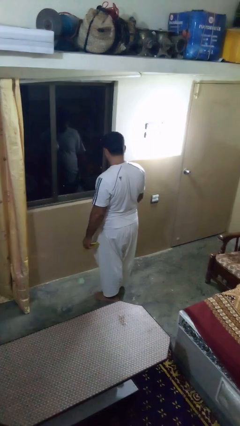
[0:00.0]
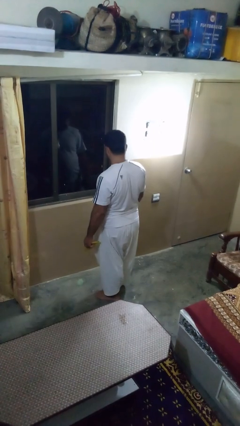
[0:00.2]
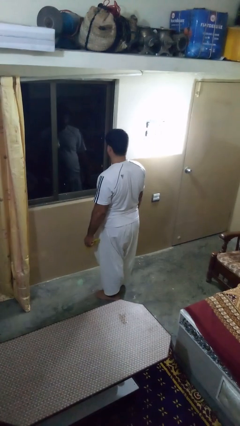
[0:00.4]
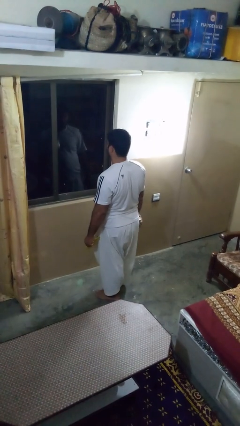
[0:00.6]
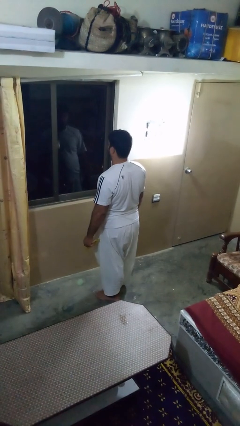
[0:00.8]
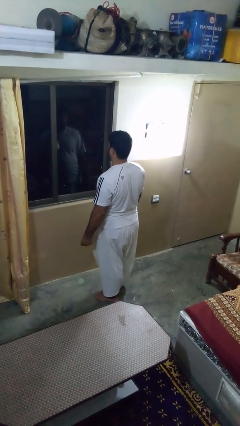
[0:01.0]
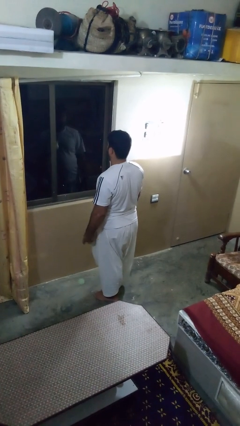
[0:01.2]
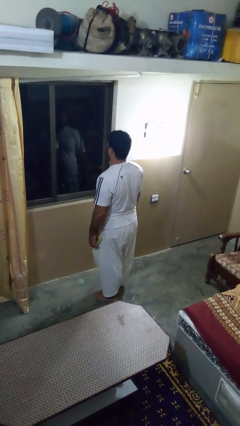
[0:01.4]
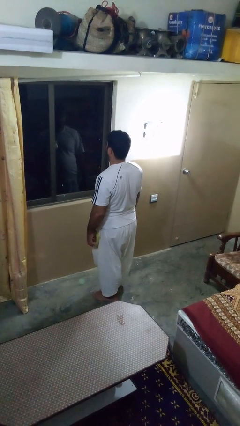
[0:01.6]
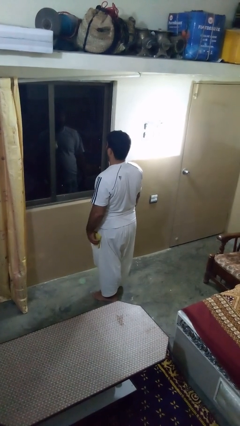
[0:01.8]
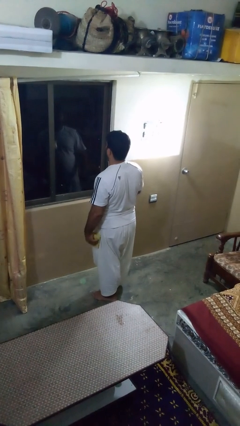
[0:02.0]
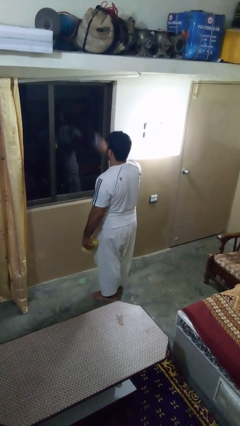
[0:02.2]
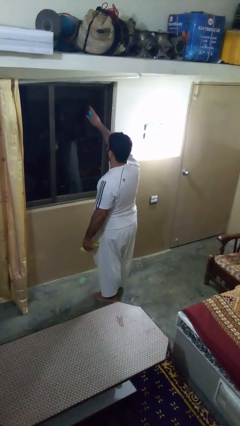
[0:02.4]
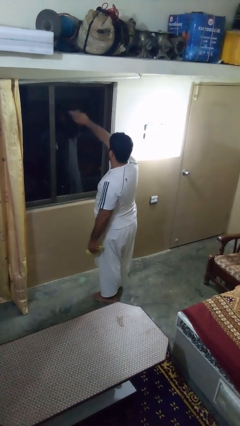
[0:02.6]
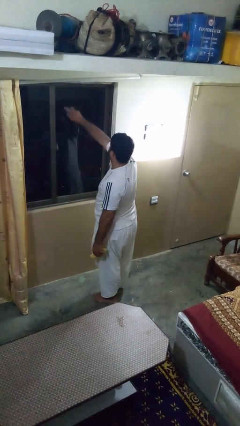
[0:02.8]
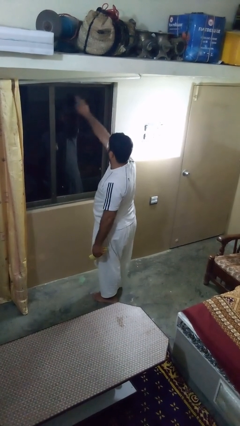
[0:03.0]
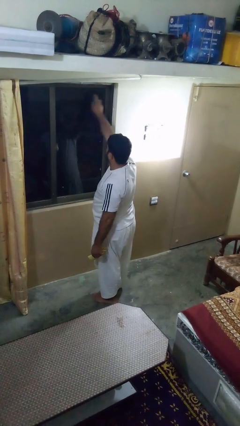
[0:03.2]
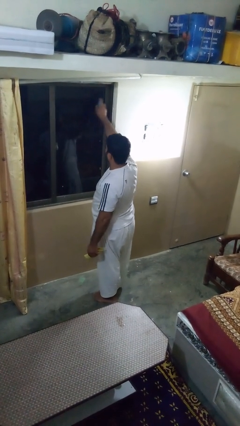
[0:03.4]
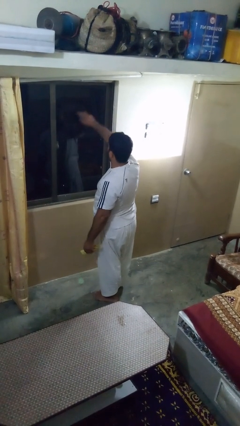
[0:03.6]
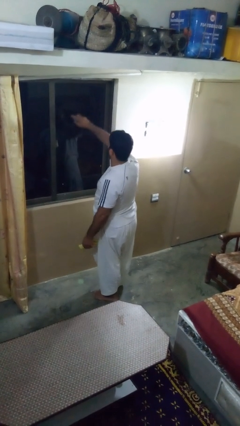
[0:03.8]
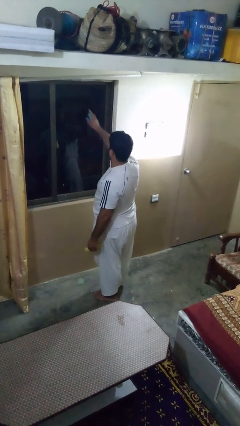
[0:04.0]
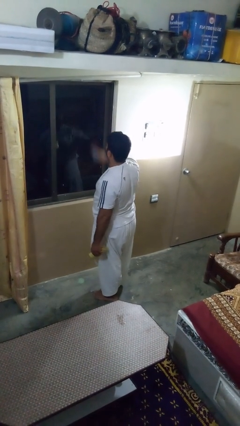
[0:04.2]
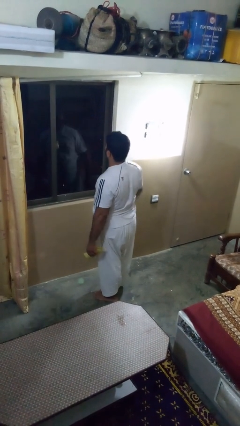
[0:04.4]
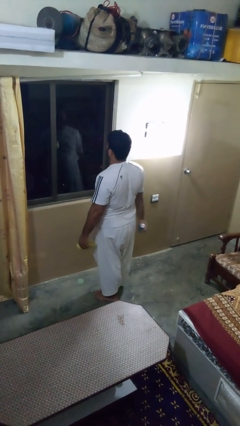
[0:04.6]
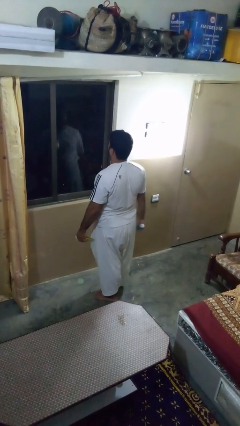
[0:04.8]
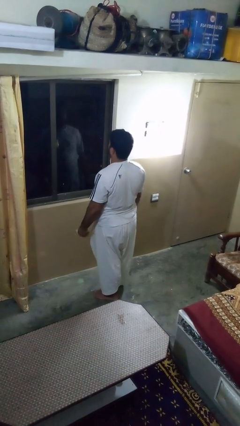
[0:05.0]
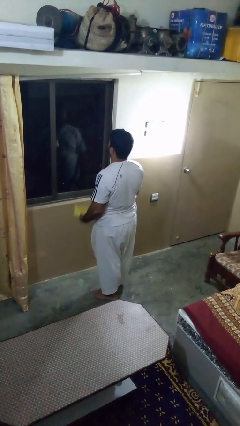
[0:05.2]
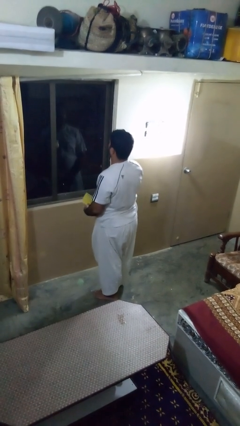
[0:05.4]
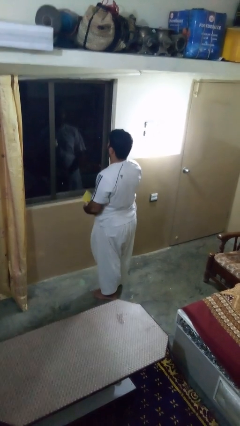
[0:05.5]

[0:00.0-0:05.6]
person sprays from bottle

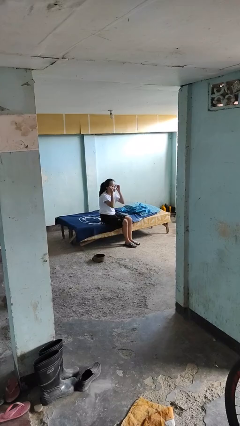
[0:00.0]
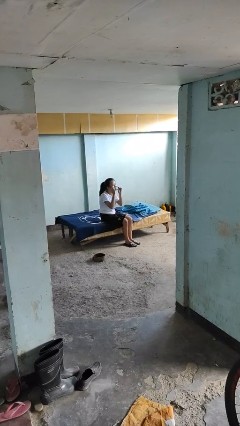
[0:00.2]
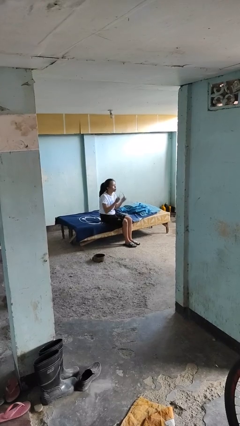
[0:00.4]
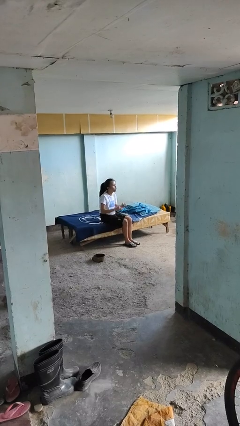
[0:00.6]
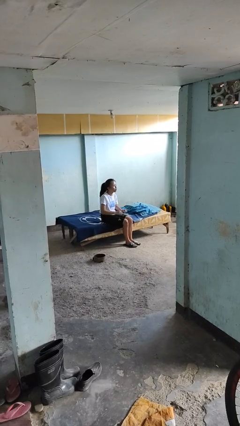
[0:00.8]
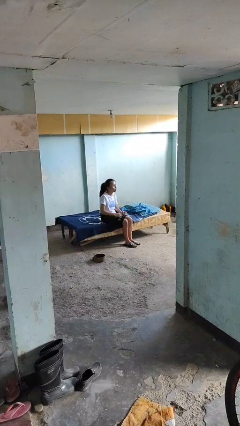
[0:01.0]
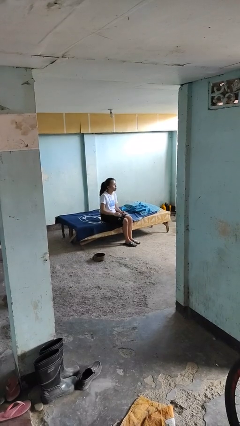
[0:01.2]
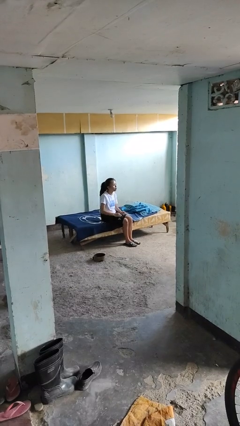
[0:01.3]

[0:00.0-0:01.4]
person takes off glasses

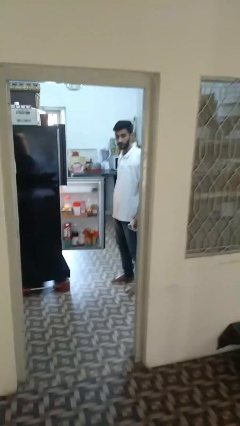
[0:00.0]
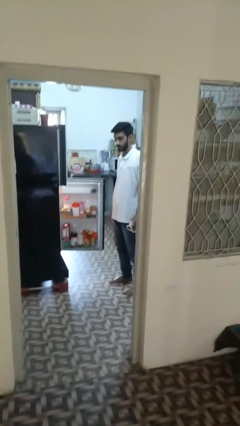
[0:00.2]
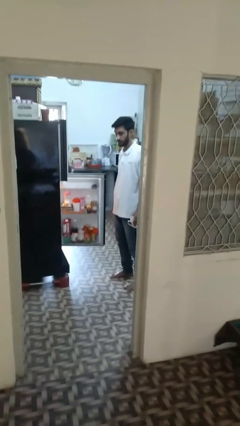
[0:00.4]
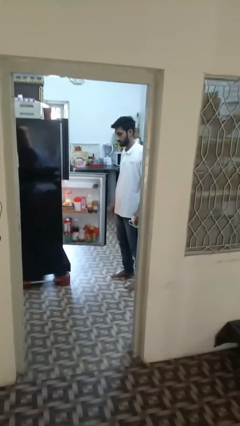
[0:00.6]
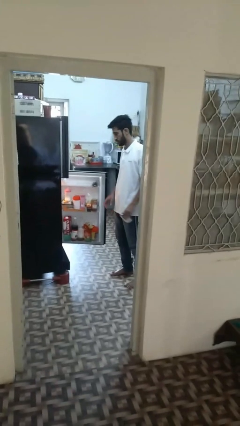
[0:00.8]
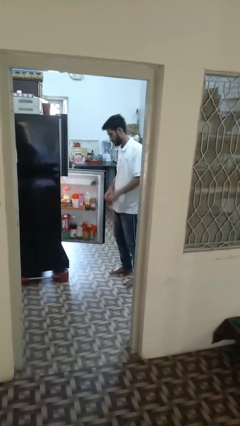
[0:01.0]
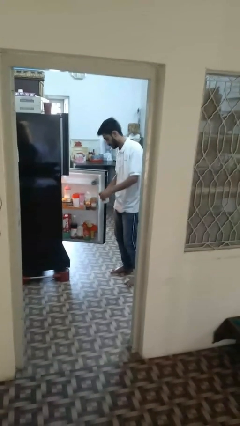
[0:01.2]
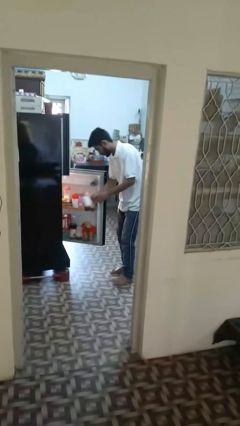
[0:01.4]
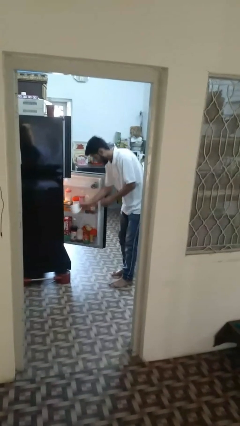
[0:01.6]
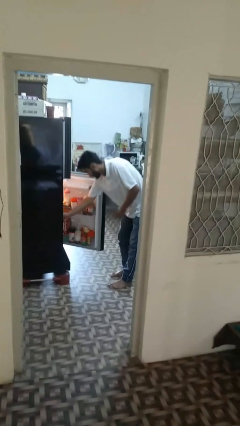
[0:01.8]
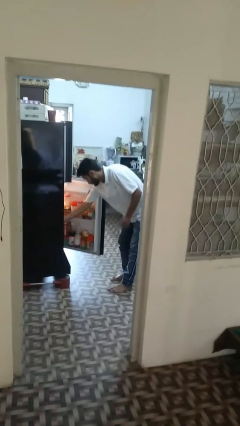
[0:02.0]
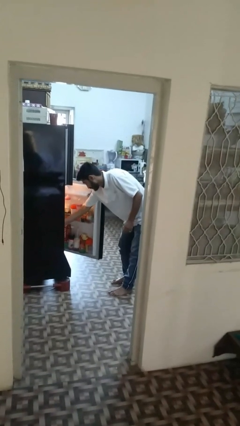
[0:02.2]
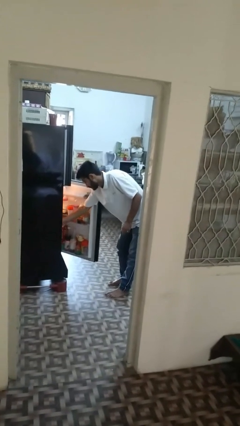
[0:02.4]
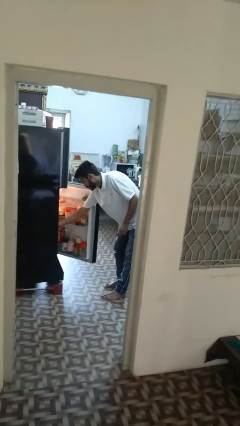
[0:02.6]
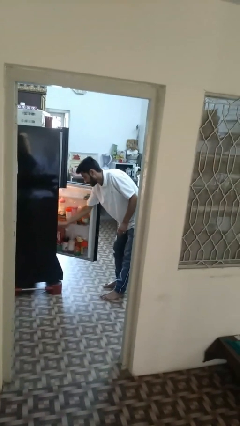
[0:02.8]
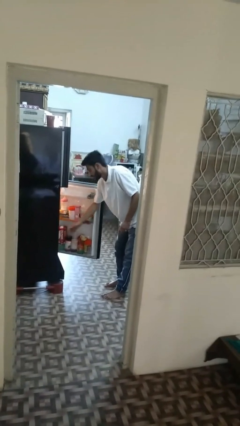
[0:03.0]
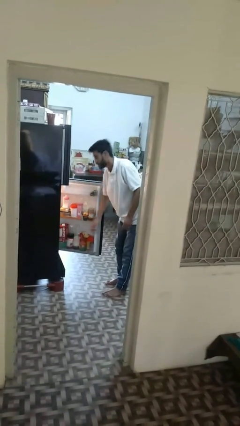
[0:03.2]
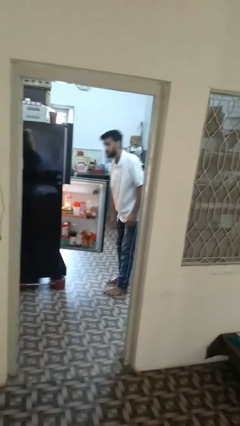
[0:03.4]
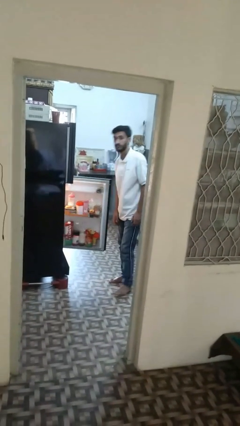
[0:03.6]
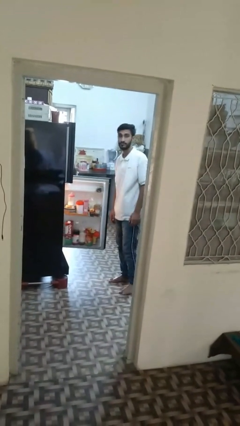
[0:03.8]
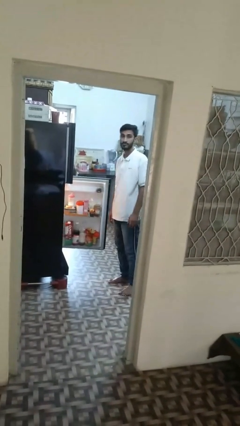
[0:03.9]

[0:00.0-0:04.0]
person puts object into refrigerator

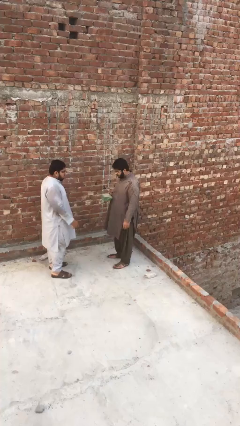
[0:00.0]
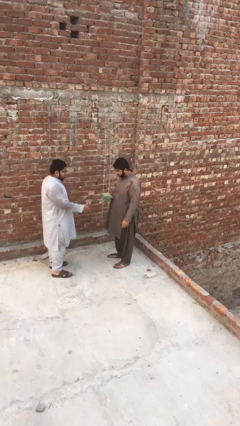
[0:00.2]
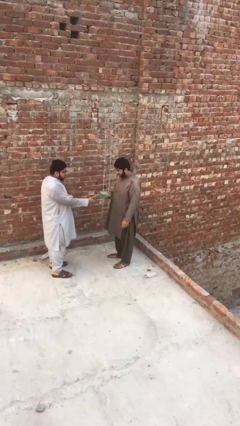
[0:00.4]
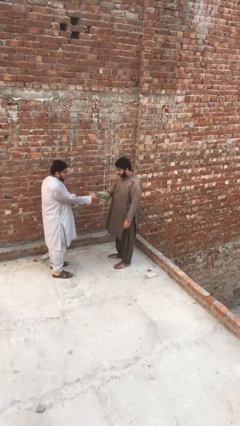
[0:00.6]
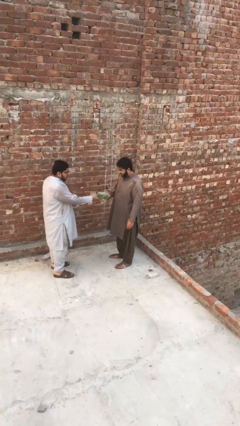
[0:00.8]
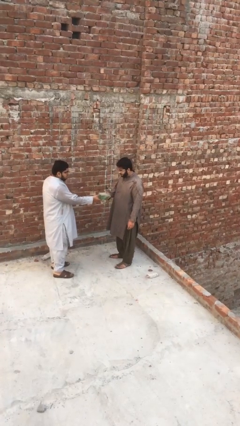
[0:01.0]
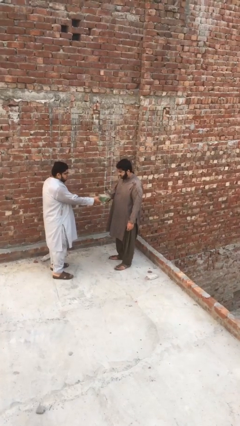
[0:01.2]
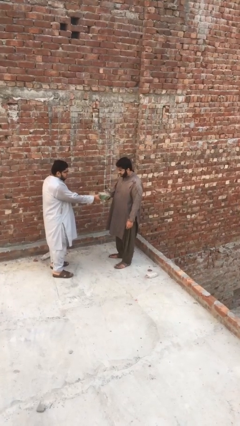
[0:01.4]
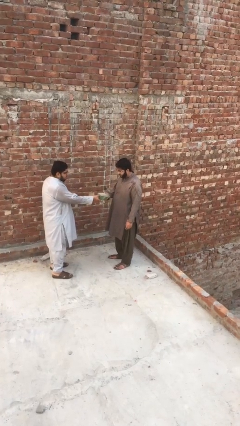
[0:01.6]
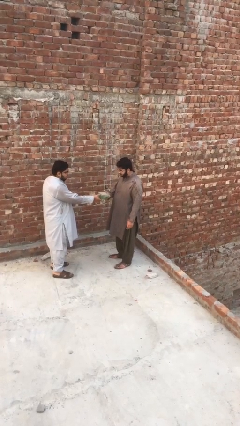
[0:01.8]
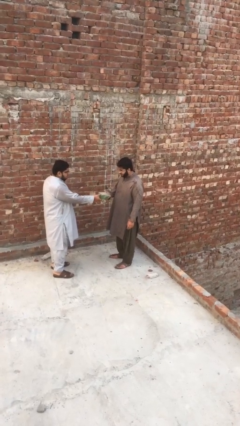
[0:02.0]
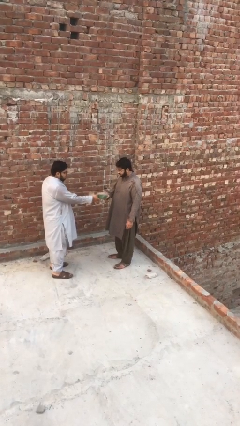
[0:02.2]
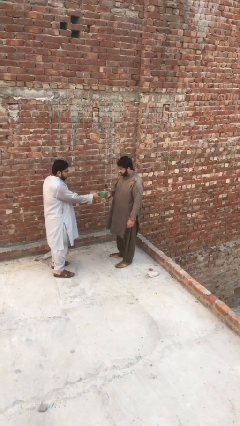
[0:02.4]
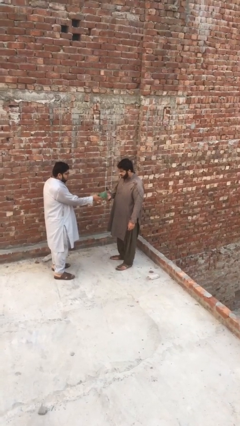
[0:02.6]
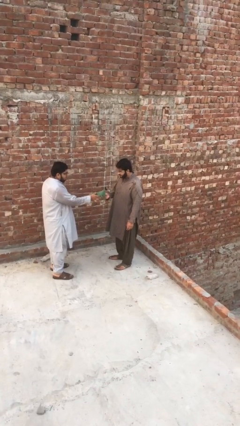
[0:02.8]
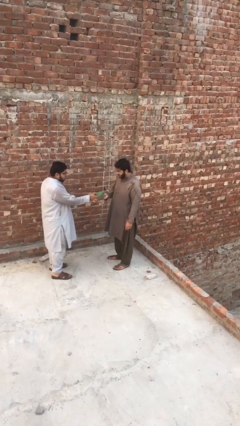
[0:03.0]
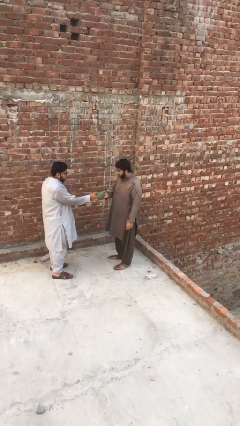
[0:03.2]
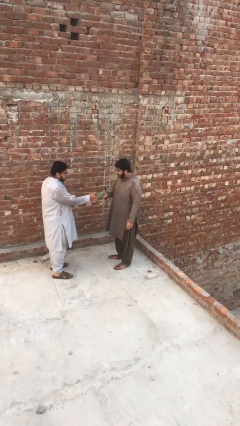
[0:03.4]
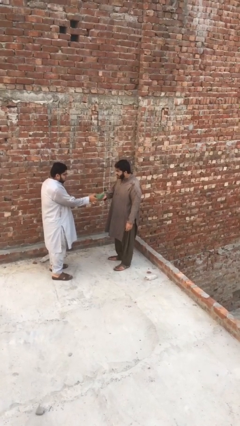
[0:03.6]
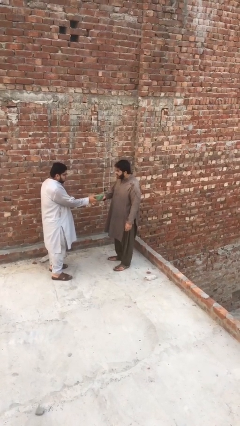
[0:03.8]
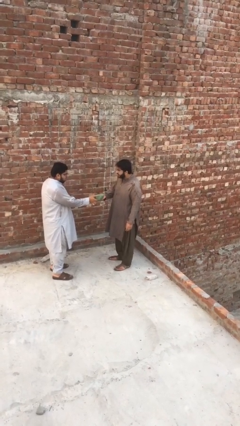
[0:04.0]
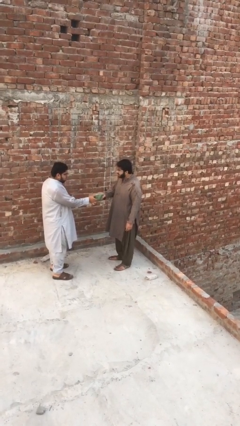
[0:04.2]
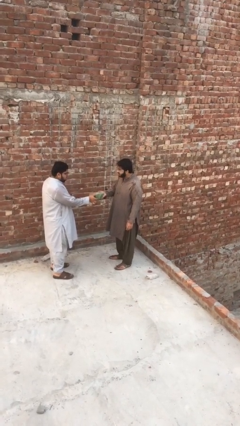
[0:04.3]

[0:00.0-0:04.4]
person transfers object to person

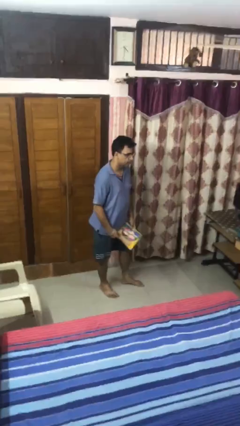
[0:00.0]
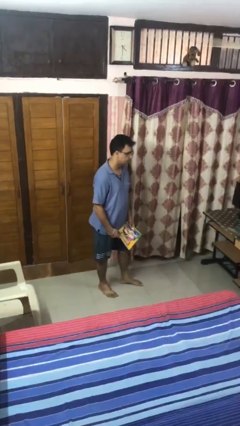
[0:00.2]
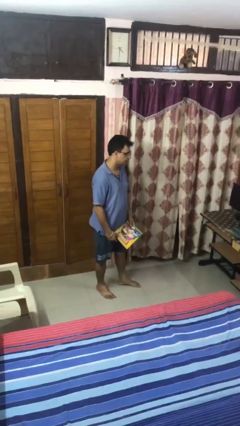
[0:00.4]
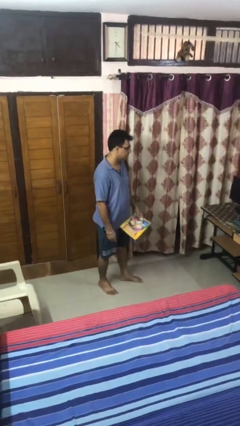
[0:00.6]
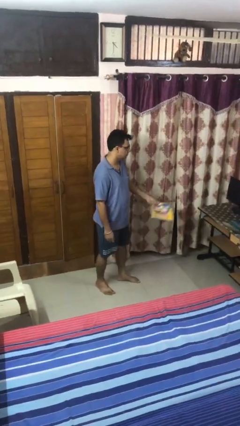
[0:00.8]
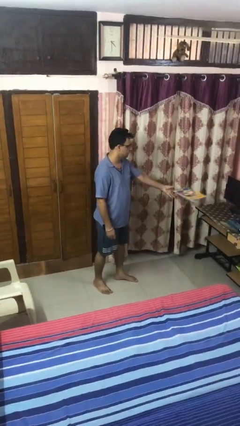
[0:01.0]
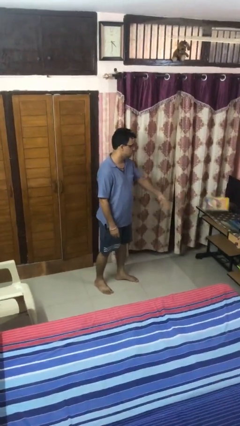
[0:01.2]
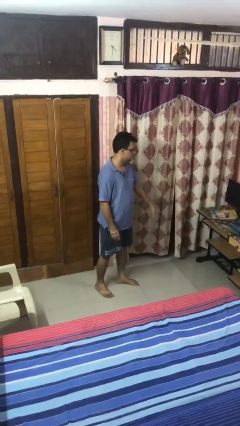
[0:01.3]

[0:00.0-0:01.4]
person throws object on table

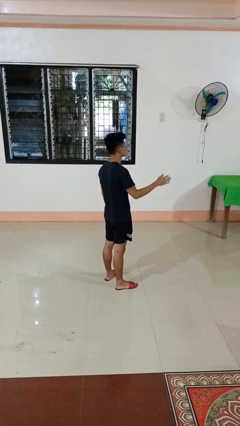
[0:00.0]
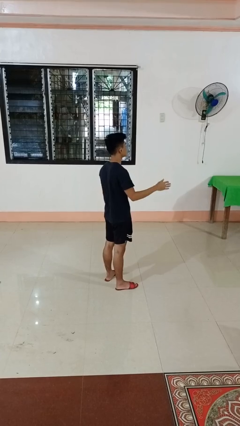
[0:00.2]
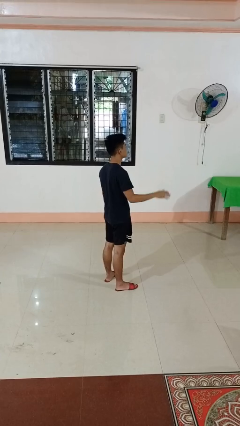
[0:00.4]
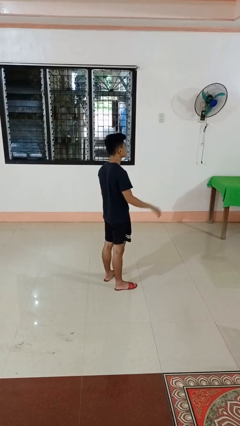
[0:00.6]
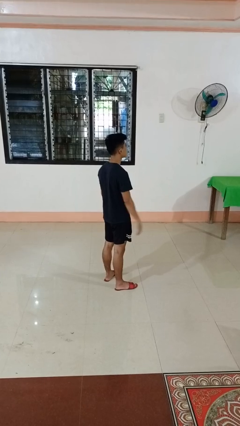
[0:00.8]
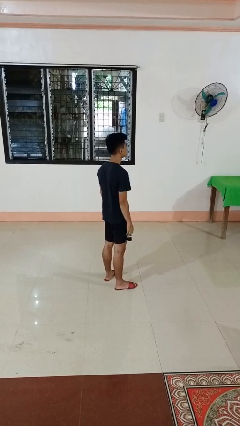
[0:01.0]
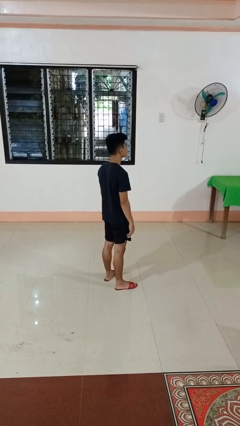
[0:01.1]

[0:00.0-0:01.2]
person gestures swipe right
